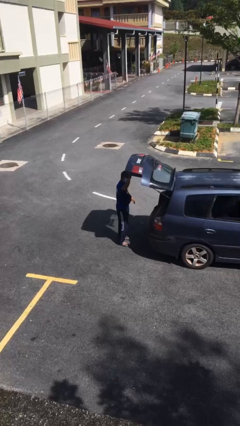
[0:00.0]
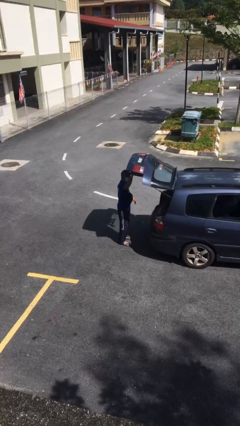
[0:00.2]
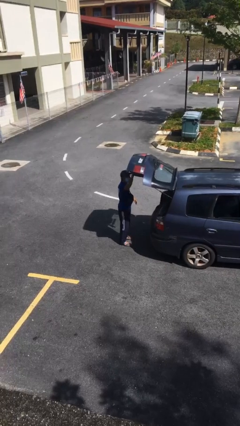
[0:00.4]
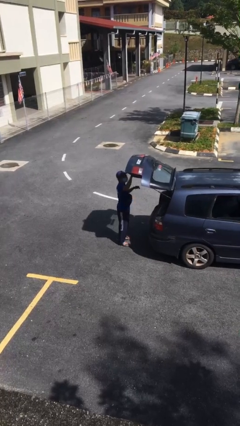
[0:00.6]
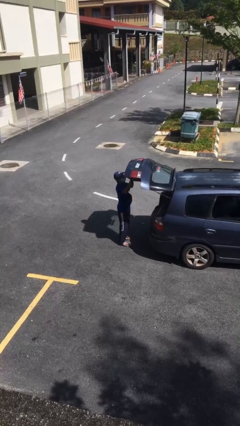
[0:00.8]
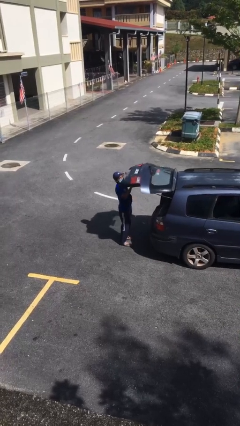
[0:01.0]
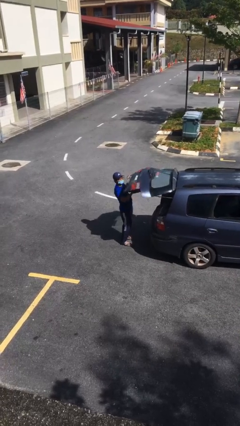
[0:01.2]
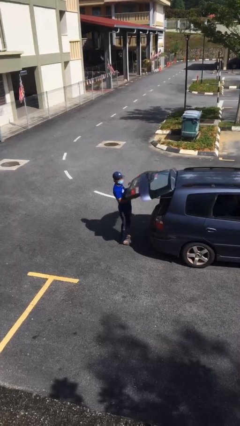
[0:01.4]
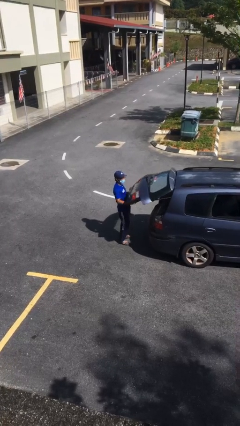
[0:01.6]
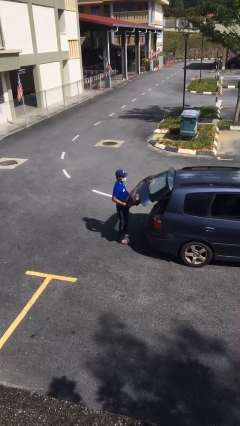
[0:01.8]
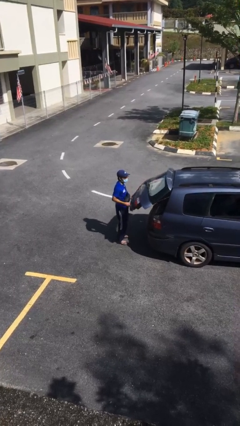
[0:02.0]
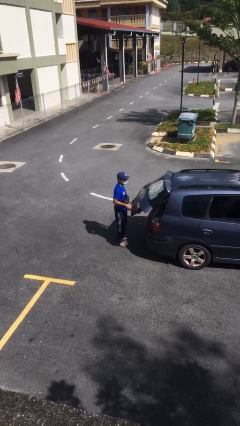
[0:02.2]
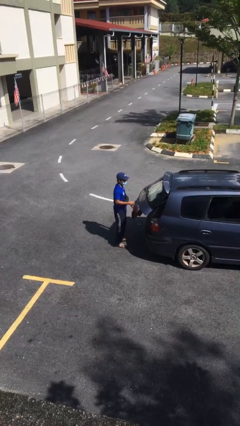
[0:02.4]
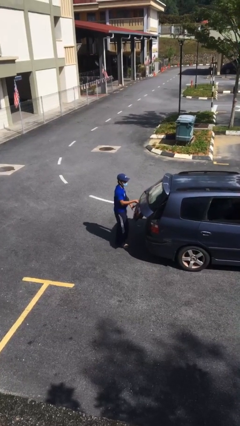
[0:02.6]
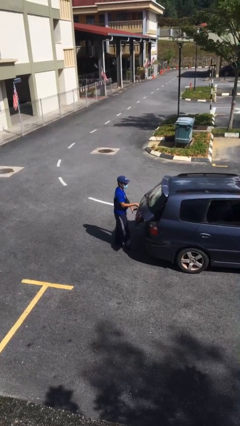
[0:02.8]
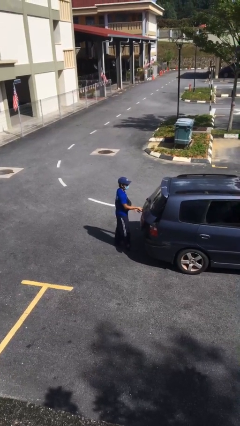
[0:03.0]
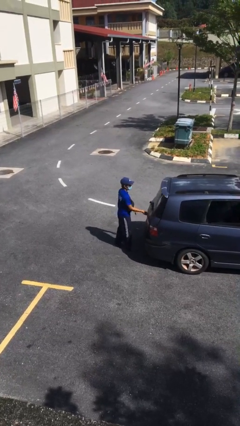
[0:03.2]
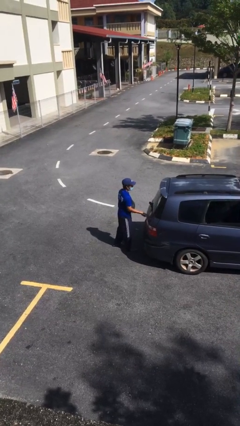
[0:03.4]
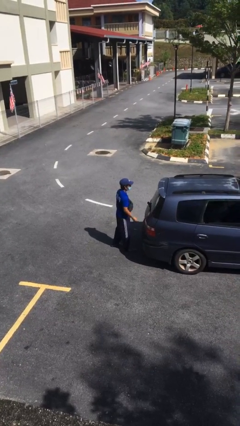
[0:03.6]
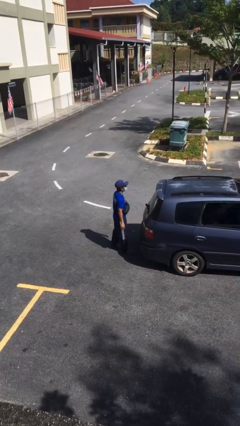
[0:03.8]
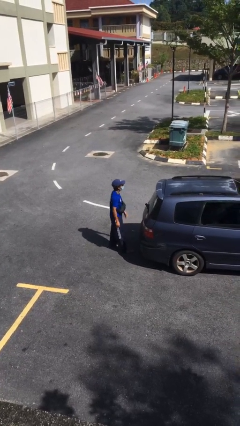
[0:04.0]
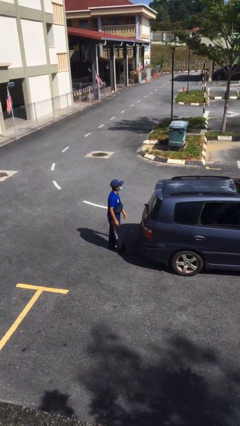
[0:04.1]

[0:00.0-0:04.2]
person closes car trunk

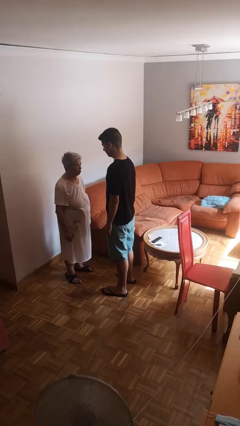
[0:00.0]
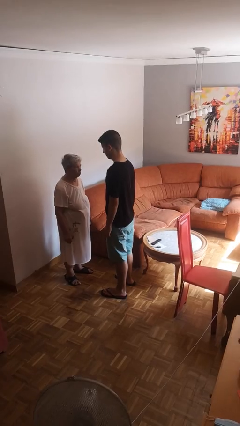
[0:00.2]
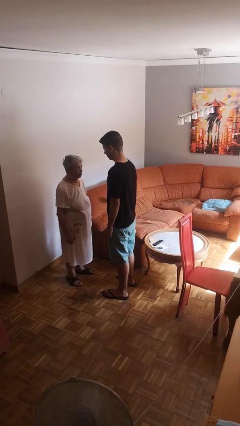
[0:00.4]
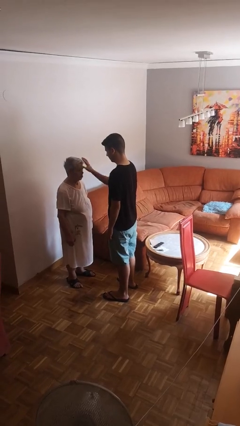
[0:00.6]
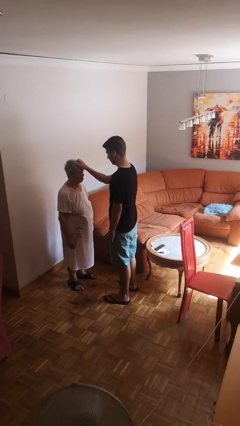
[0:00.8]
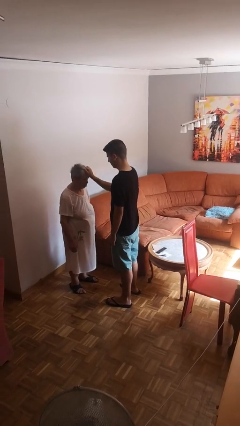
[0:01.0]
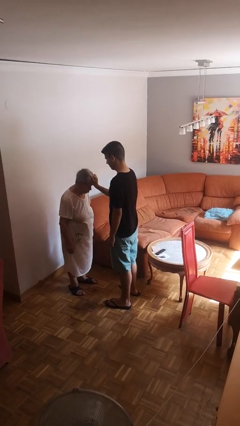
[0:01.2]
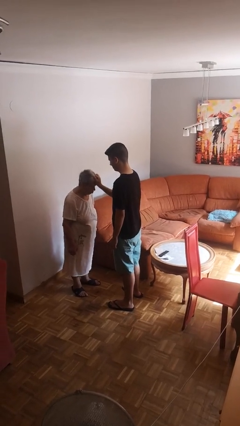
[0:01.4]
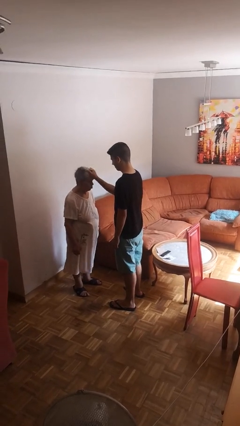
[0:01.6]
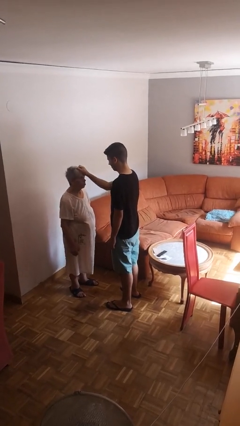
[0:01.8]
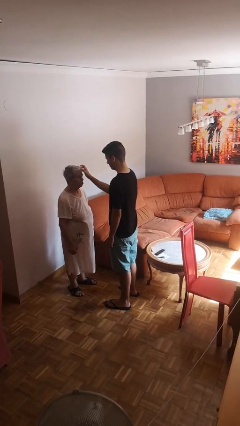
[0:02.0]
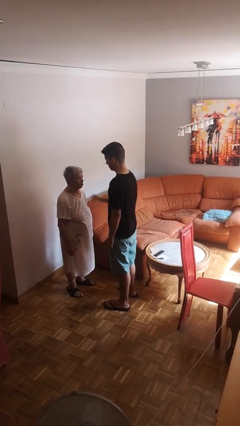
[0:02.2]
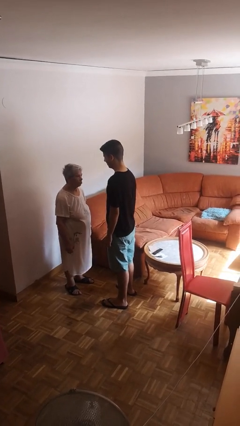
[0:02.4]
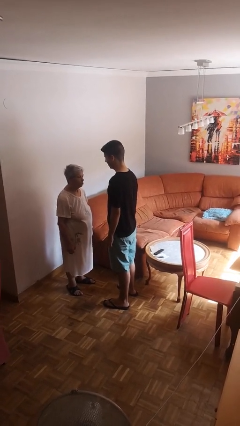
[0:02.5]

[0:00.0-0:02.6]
person grabs person by hair

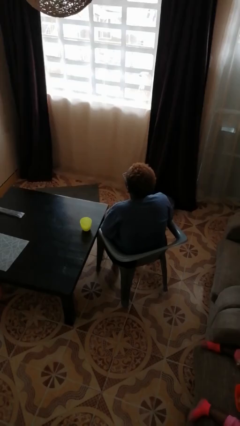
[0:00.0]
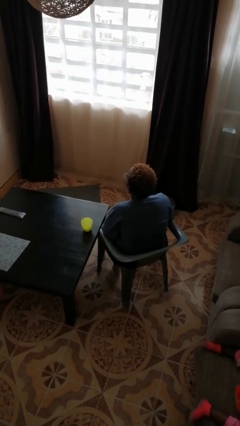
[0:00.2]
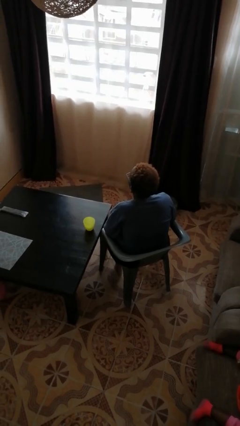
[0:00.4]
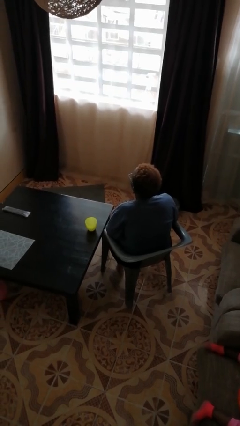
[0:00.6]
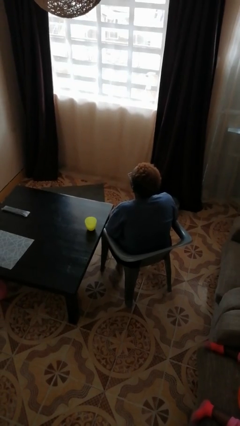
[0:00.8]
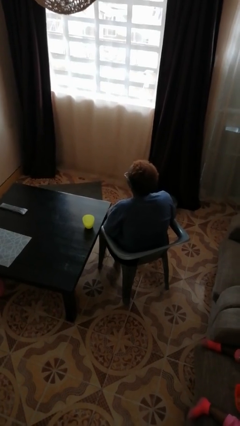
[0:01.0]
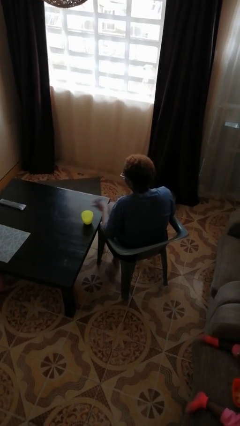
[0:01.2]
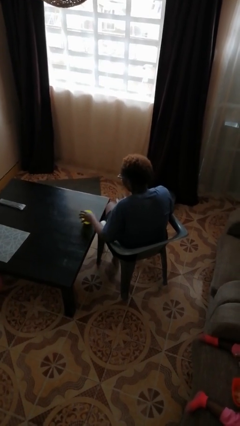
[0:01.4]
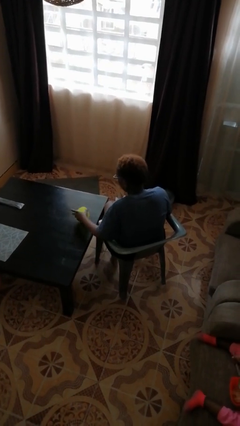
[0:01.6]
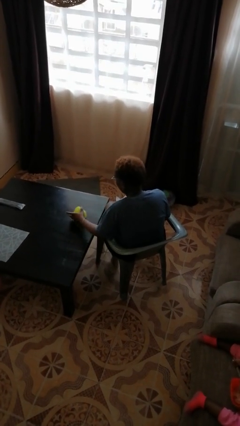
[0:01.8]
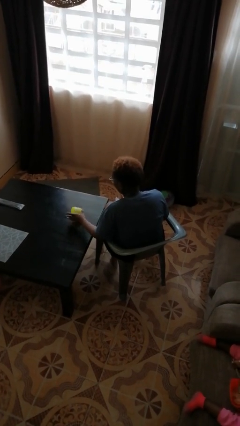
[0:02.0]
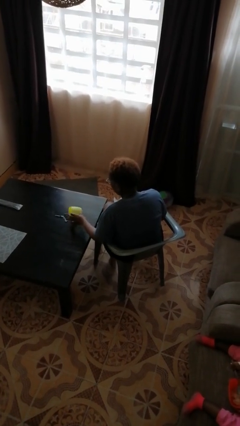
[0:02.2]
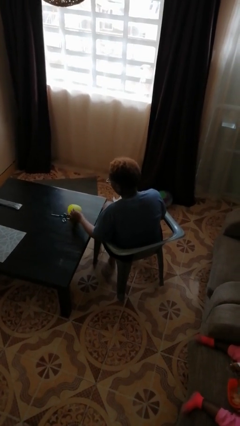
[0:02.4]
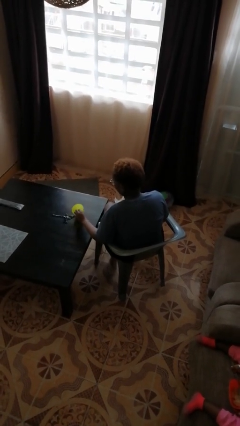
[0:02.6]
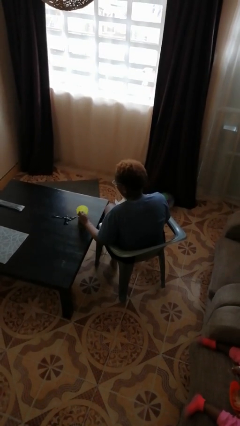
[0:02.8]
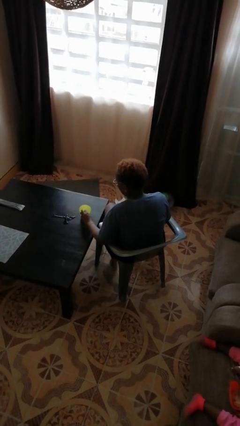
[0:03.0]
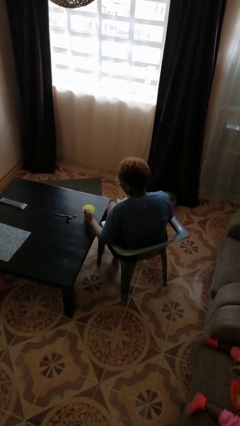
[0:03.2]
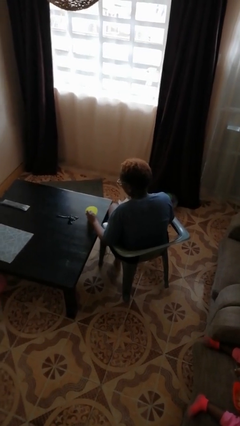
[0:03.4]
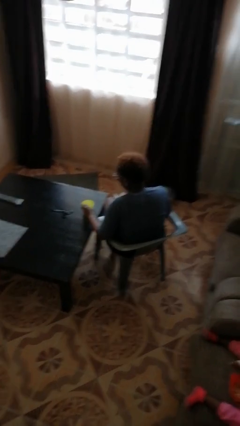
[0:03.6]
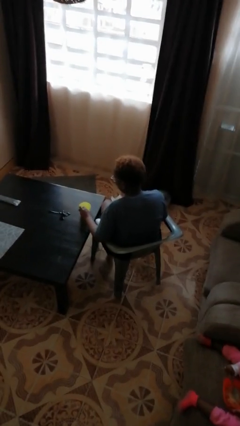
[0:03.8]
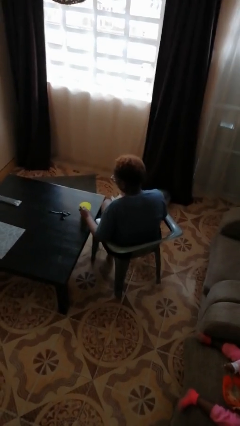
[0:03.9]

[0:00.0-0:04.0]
person spills on table

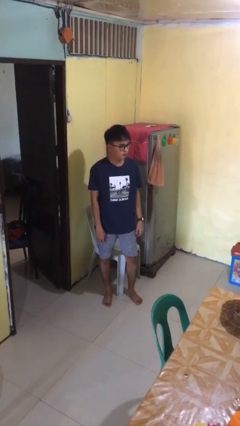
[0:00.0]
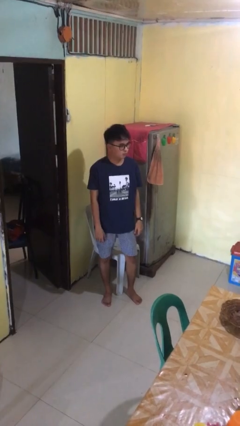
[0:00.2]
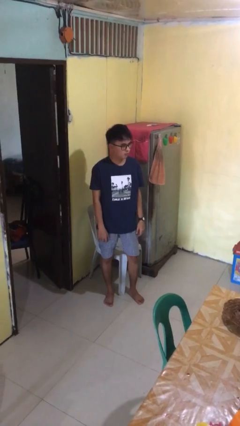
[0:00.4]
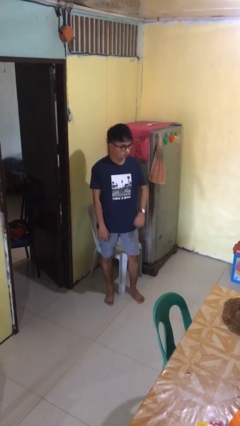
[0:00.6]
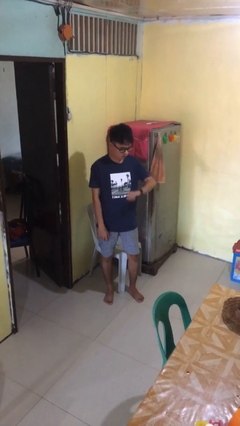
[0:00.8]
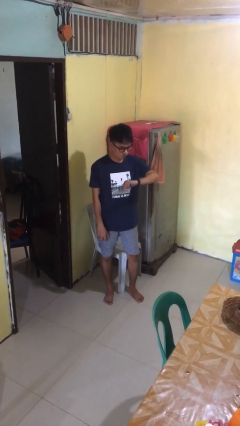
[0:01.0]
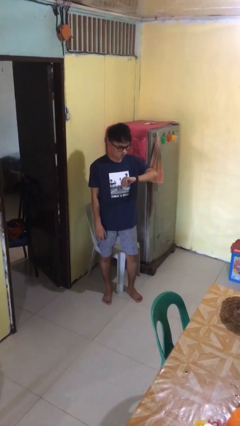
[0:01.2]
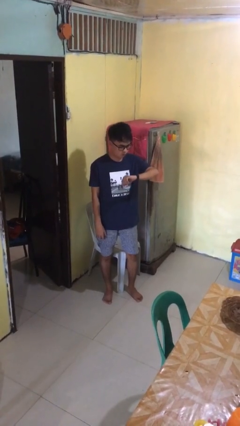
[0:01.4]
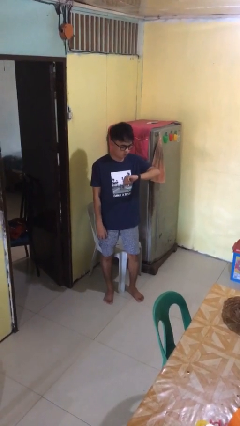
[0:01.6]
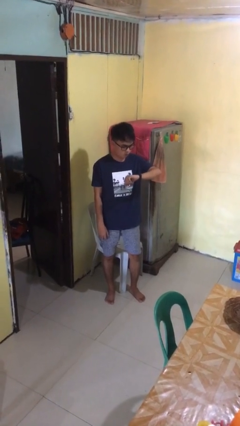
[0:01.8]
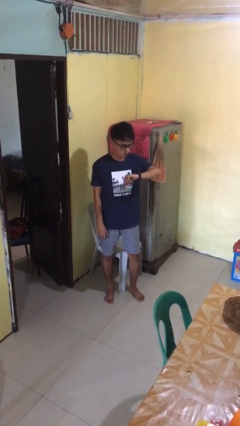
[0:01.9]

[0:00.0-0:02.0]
person looks at wristwatch

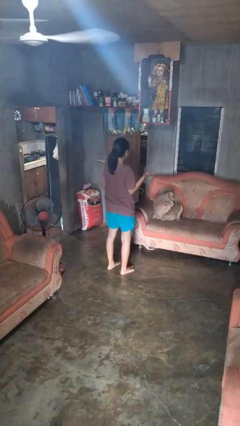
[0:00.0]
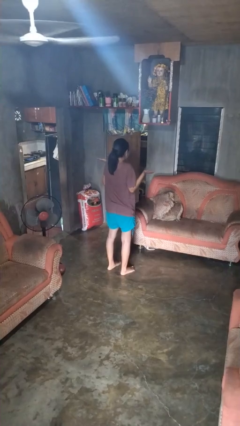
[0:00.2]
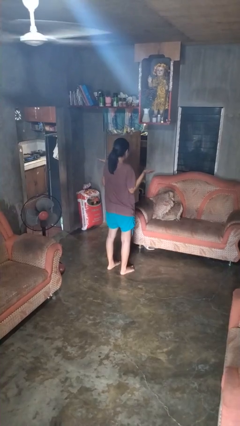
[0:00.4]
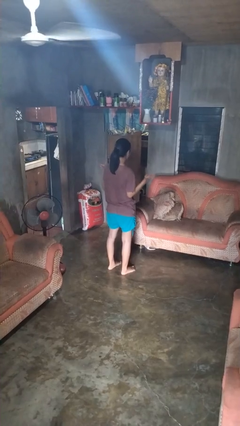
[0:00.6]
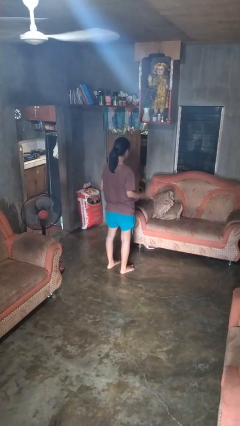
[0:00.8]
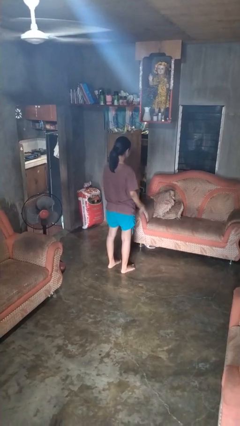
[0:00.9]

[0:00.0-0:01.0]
person shrugs

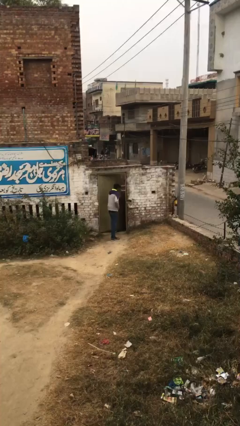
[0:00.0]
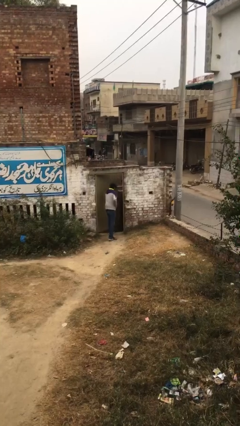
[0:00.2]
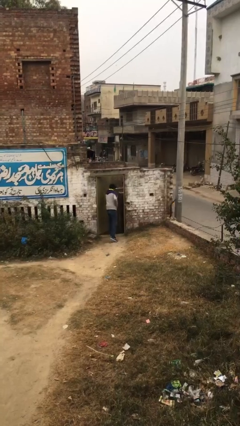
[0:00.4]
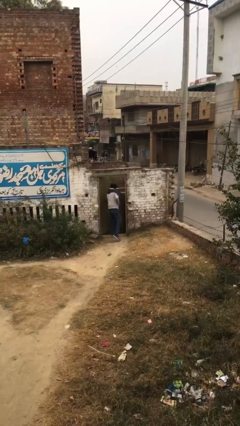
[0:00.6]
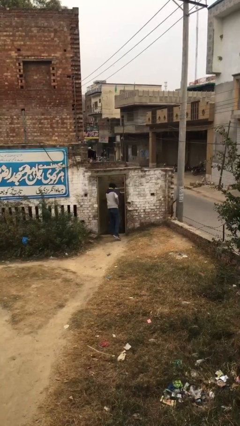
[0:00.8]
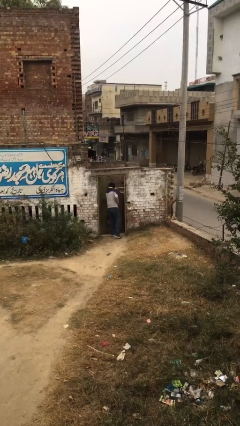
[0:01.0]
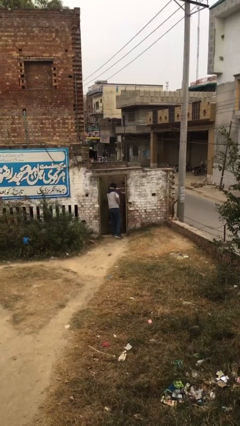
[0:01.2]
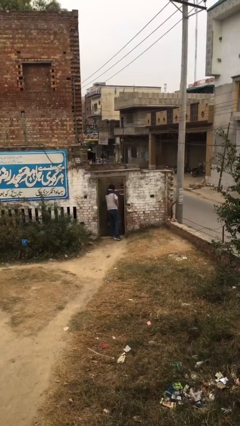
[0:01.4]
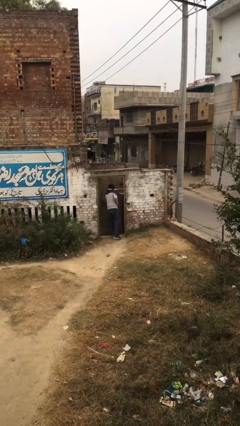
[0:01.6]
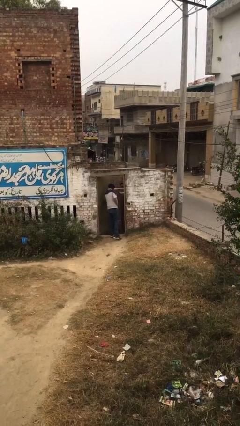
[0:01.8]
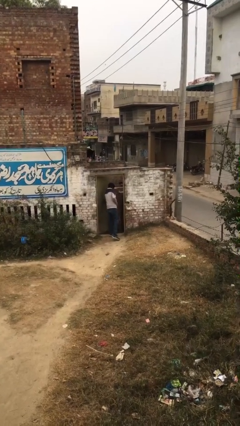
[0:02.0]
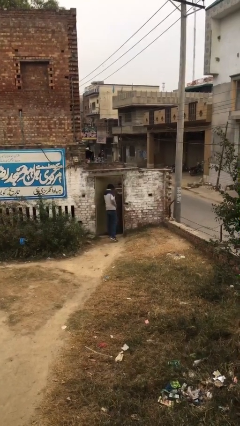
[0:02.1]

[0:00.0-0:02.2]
person opens facility door

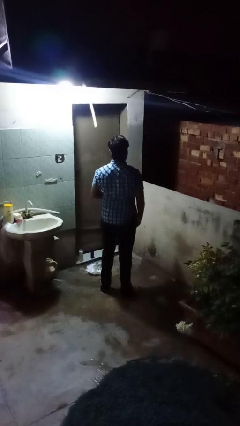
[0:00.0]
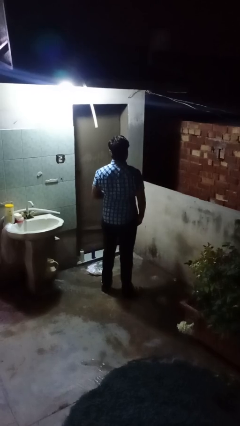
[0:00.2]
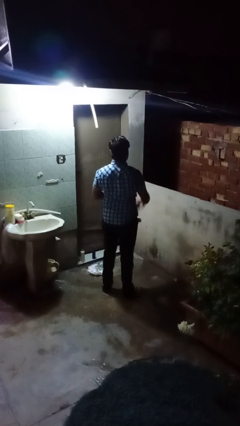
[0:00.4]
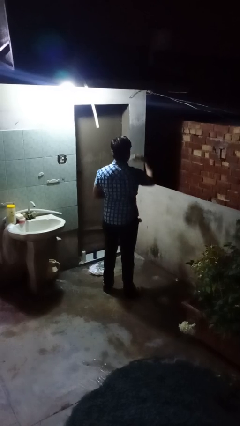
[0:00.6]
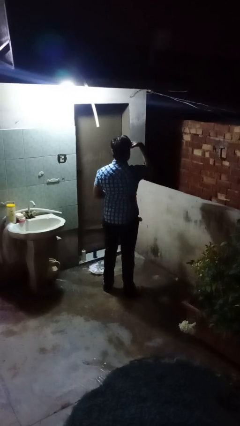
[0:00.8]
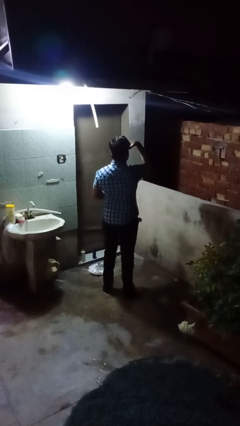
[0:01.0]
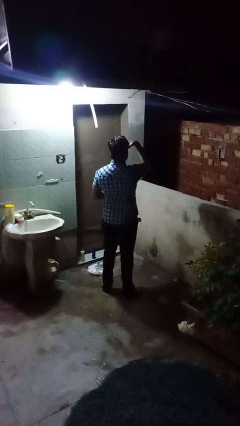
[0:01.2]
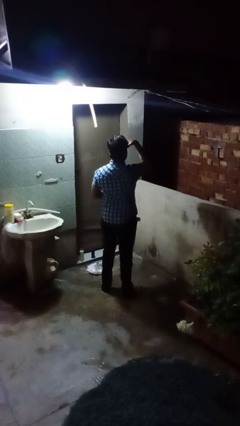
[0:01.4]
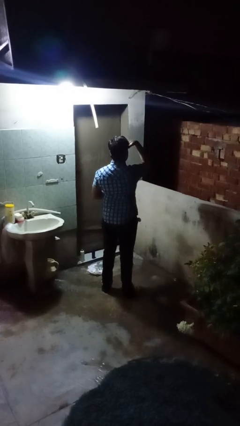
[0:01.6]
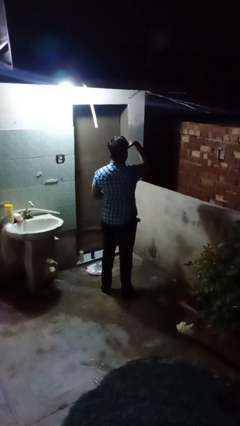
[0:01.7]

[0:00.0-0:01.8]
person shades eyes
